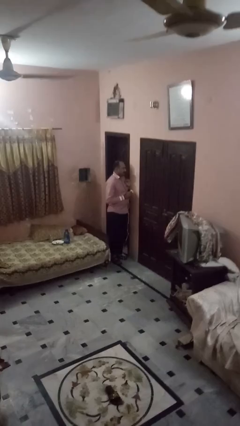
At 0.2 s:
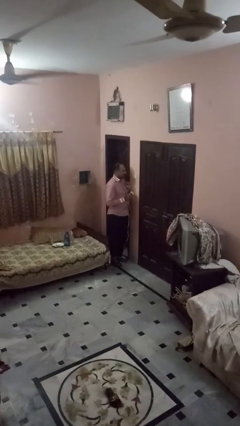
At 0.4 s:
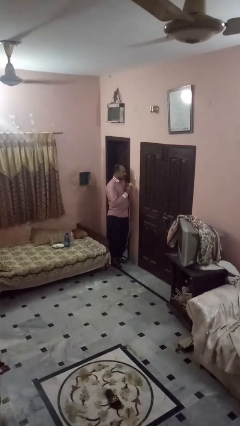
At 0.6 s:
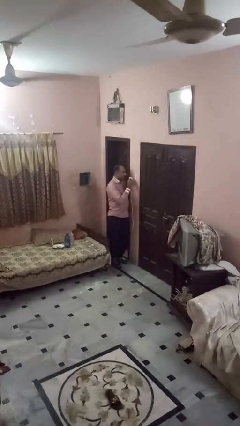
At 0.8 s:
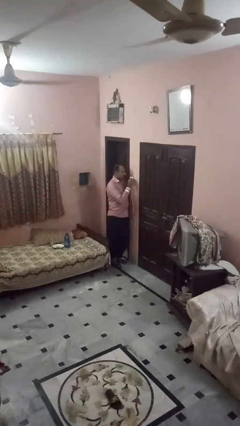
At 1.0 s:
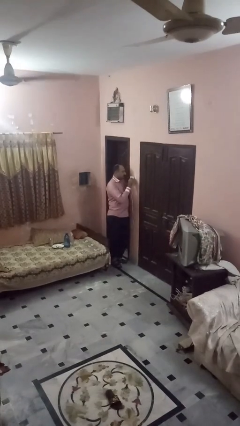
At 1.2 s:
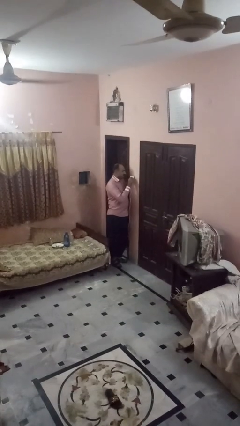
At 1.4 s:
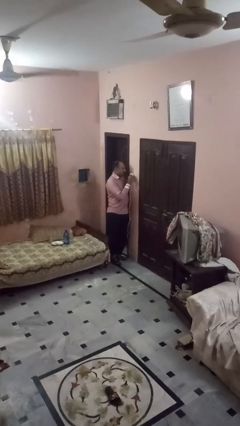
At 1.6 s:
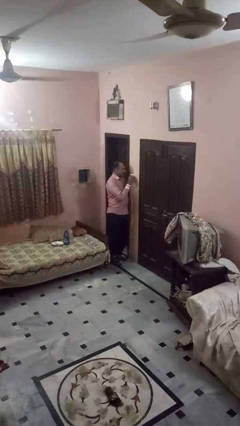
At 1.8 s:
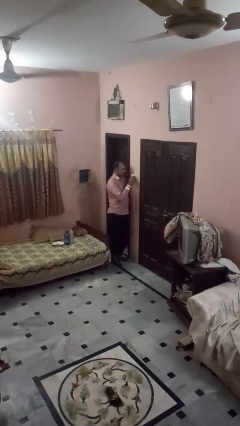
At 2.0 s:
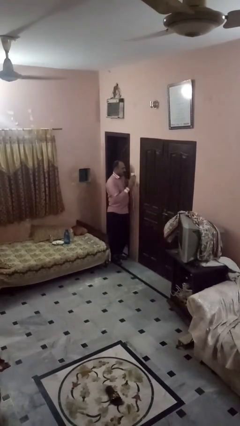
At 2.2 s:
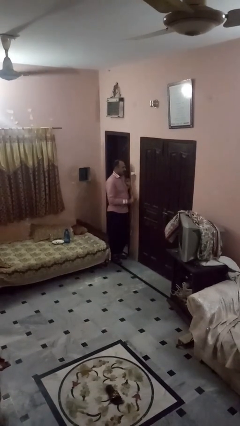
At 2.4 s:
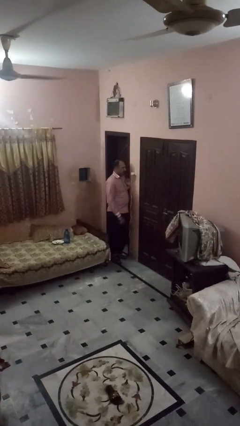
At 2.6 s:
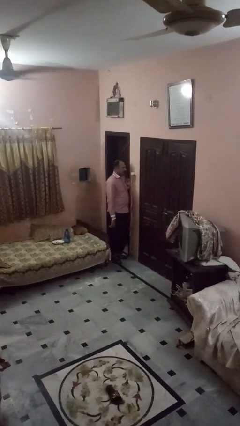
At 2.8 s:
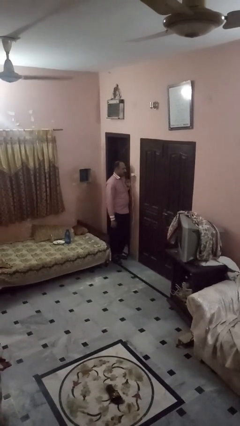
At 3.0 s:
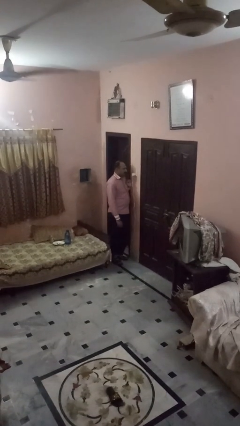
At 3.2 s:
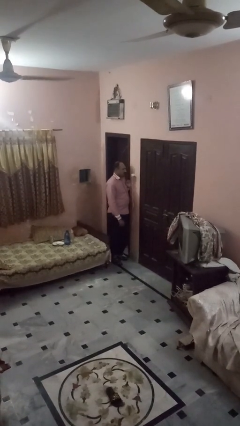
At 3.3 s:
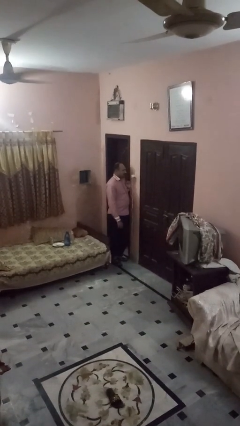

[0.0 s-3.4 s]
person plugs into electrical socket

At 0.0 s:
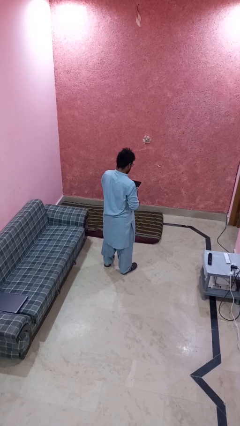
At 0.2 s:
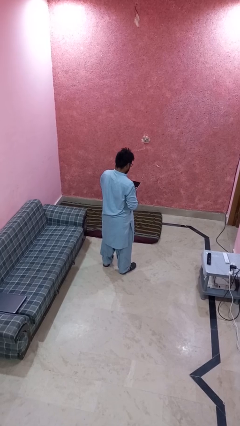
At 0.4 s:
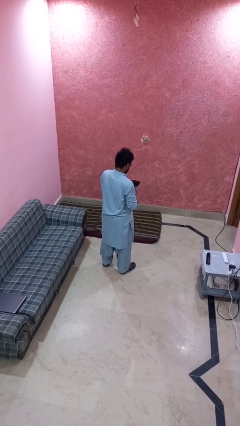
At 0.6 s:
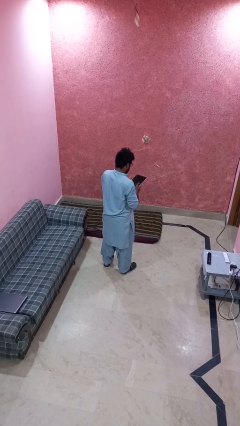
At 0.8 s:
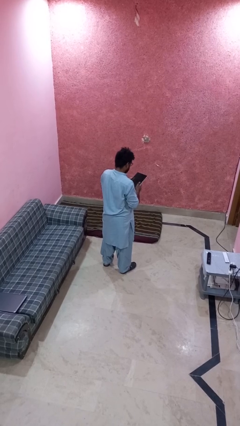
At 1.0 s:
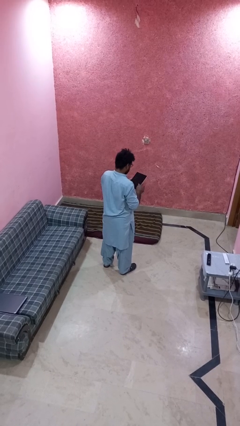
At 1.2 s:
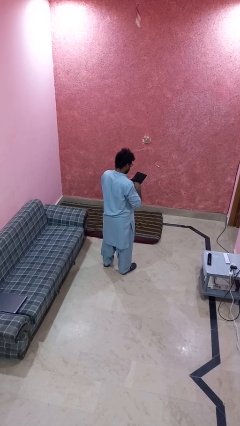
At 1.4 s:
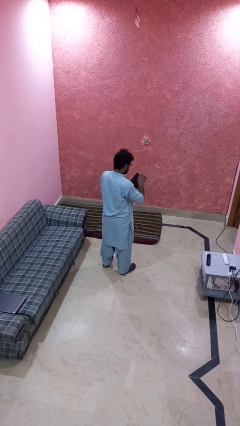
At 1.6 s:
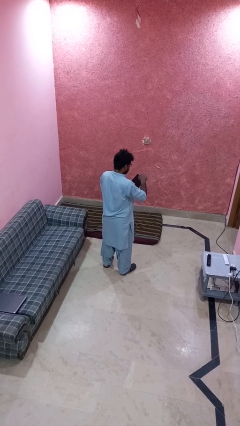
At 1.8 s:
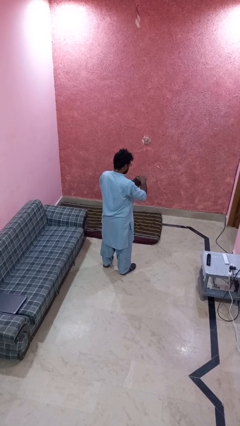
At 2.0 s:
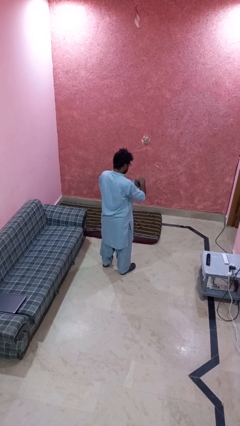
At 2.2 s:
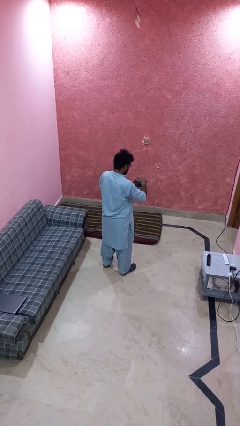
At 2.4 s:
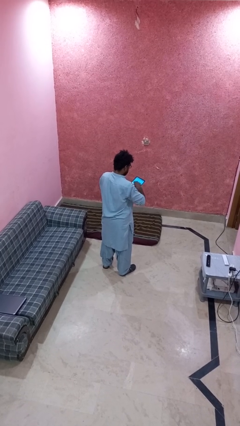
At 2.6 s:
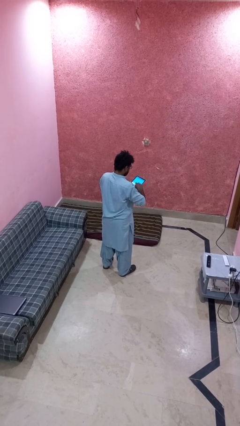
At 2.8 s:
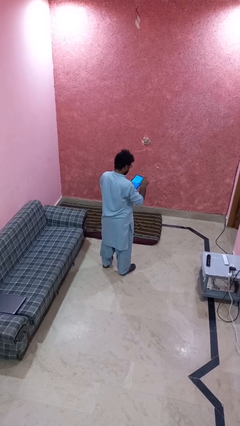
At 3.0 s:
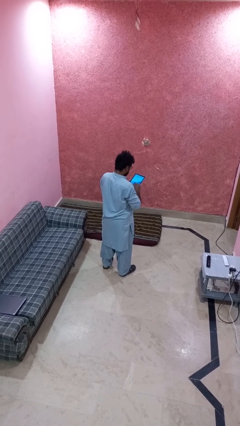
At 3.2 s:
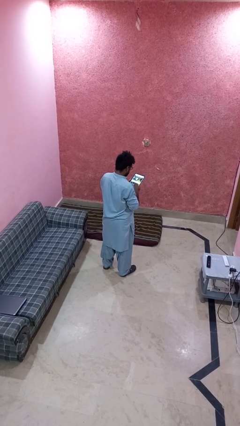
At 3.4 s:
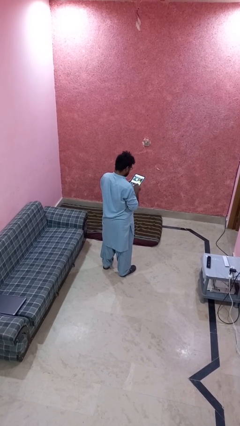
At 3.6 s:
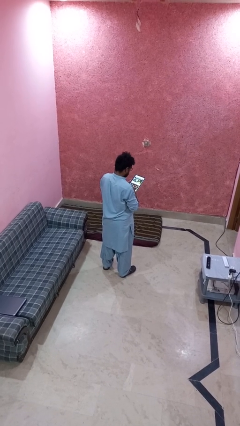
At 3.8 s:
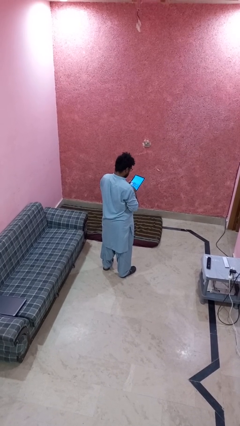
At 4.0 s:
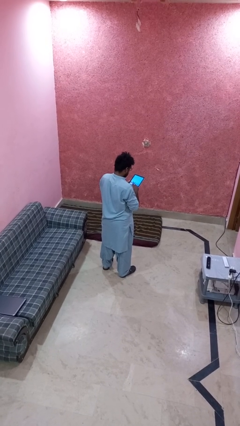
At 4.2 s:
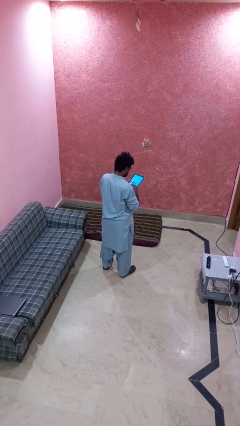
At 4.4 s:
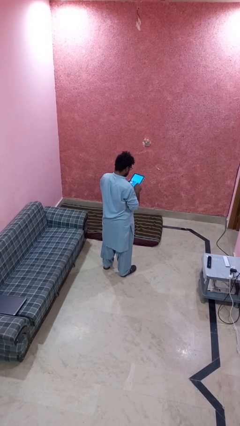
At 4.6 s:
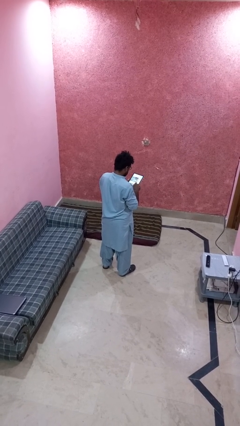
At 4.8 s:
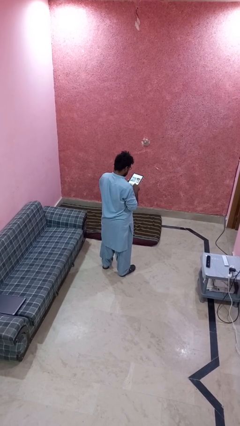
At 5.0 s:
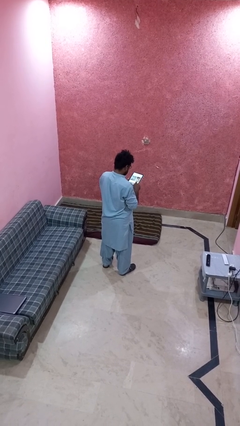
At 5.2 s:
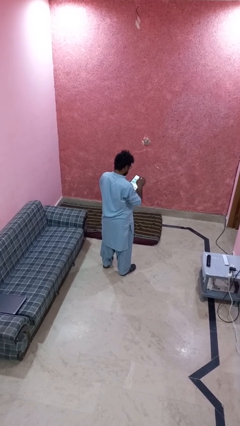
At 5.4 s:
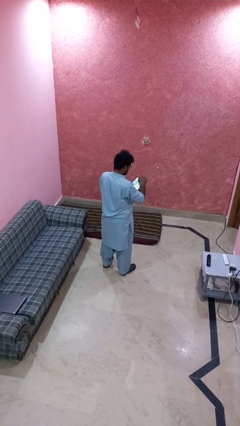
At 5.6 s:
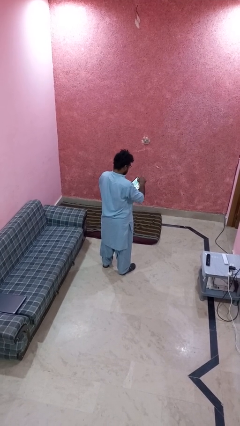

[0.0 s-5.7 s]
person interacts with tablet

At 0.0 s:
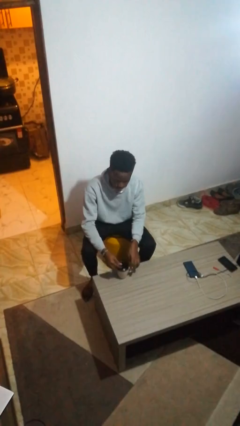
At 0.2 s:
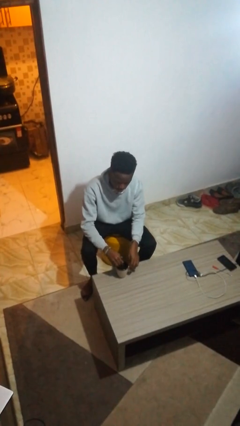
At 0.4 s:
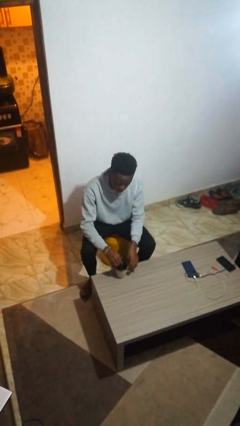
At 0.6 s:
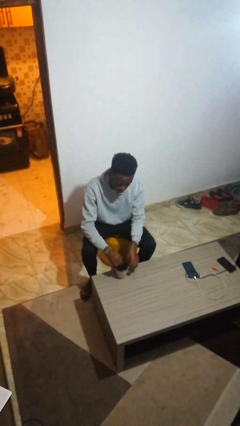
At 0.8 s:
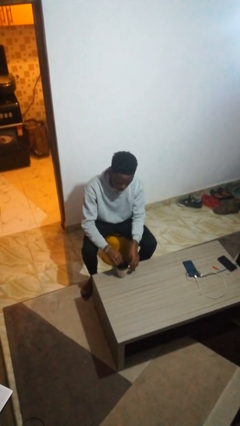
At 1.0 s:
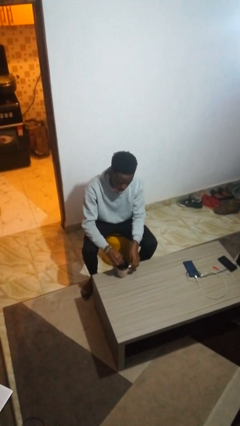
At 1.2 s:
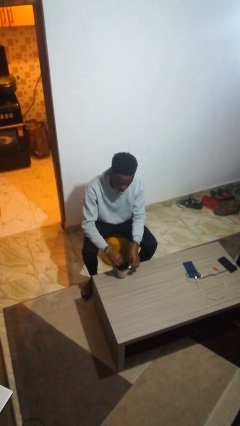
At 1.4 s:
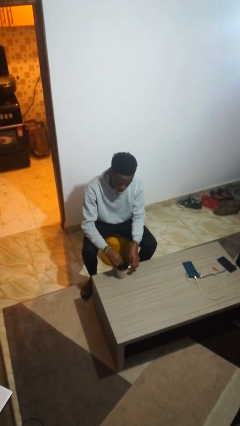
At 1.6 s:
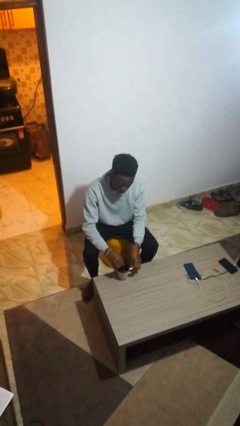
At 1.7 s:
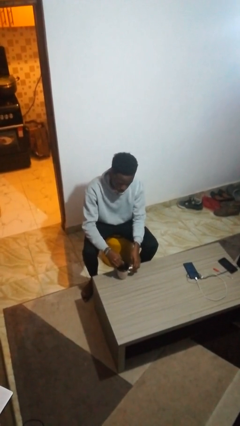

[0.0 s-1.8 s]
person stirs mug

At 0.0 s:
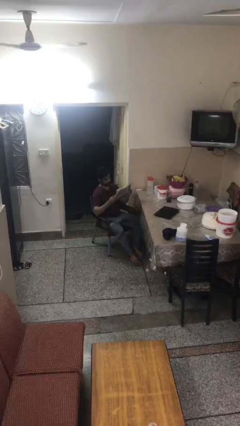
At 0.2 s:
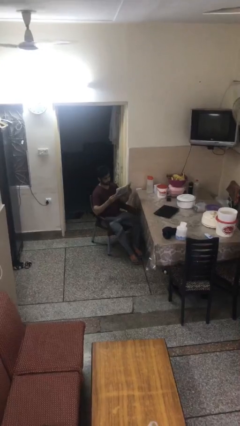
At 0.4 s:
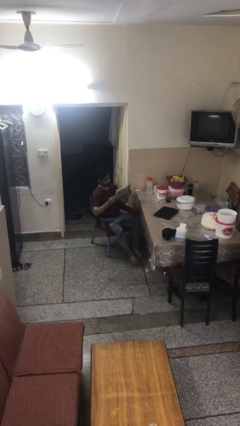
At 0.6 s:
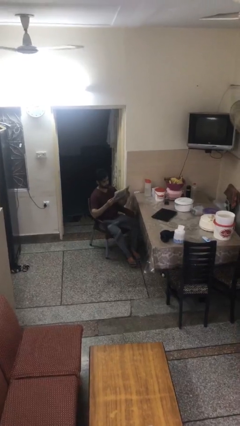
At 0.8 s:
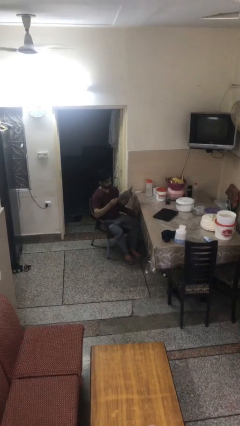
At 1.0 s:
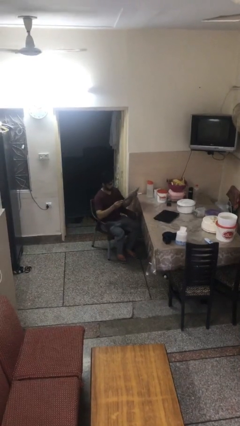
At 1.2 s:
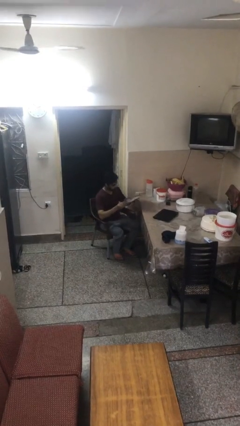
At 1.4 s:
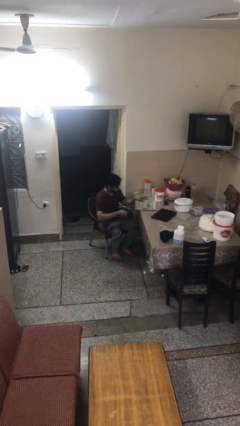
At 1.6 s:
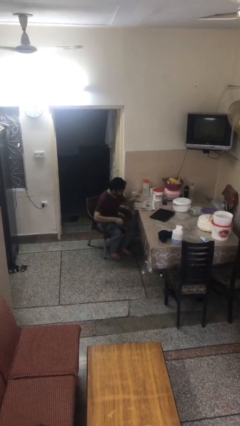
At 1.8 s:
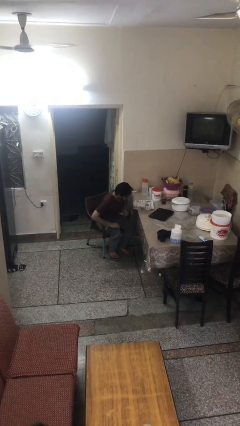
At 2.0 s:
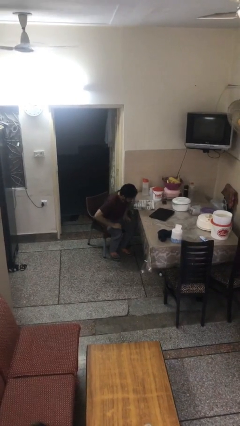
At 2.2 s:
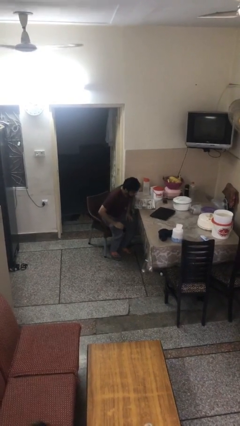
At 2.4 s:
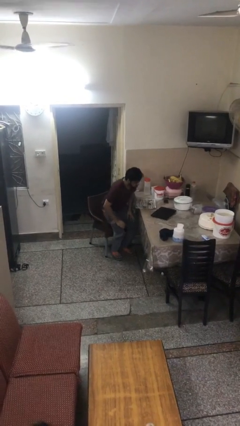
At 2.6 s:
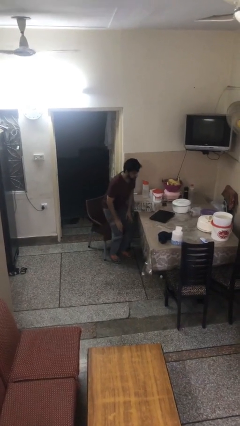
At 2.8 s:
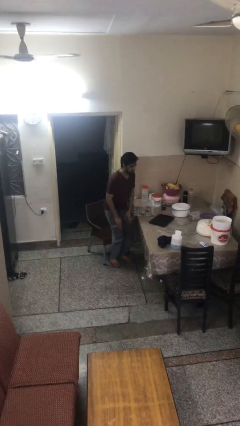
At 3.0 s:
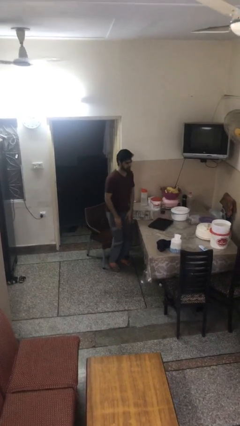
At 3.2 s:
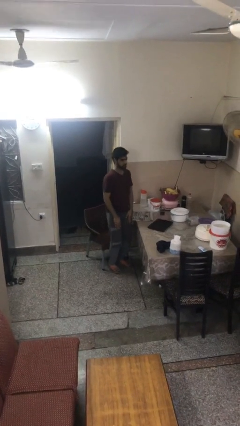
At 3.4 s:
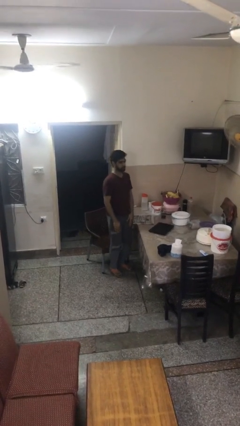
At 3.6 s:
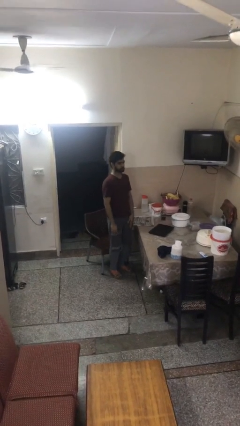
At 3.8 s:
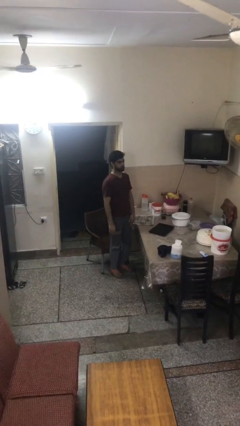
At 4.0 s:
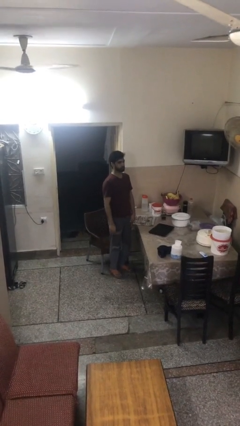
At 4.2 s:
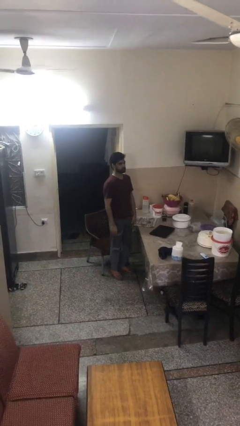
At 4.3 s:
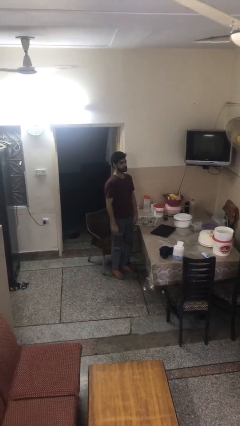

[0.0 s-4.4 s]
person stands up

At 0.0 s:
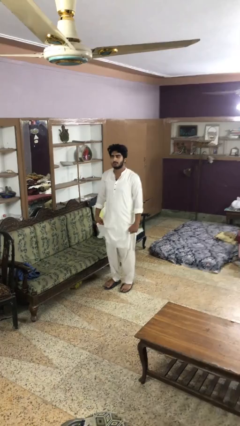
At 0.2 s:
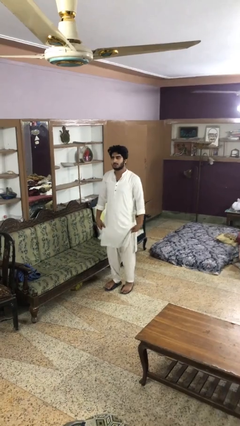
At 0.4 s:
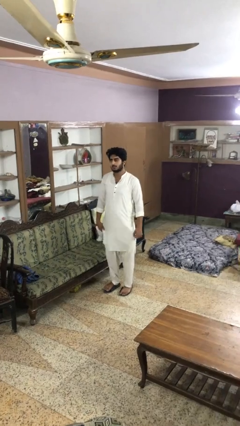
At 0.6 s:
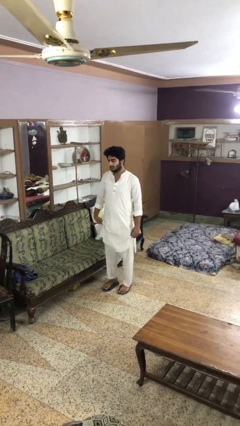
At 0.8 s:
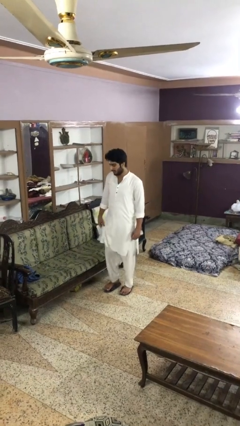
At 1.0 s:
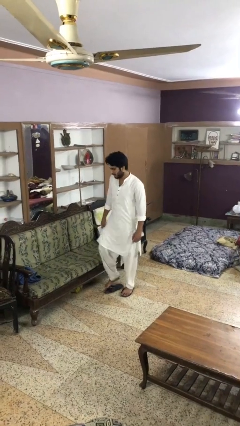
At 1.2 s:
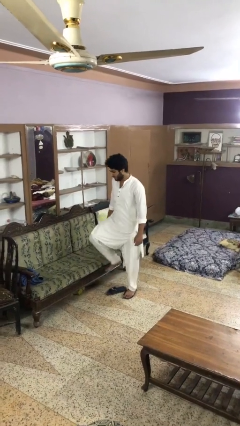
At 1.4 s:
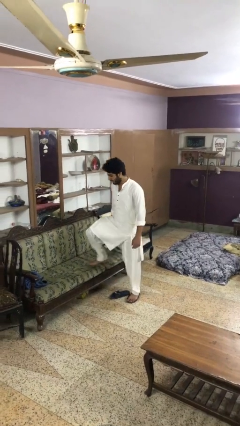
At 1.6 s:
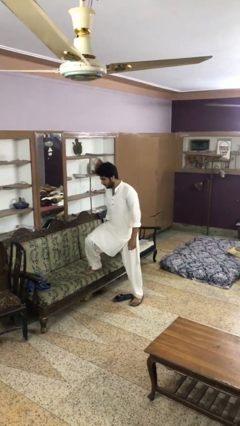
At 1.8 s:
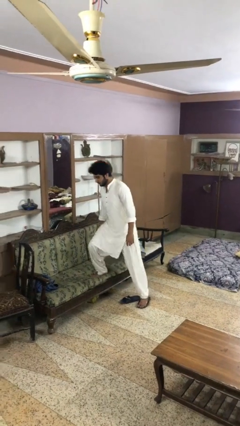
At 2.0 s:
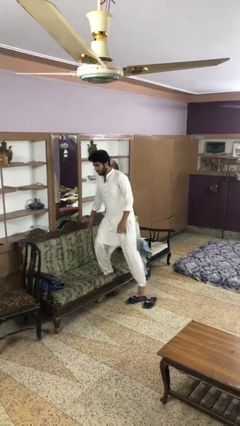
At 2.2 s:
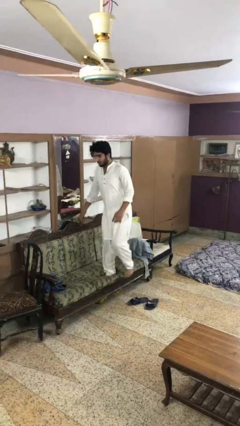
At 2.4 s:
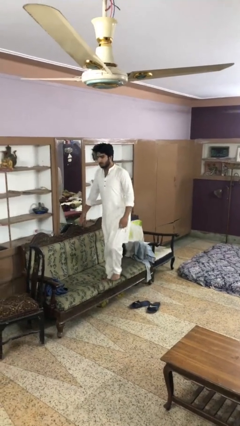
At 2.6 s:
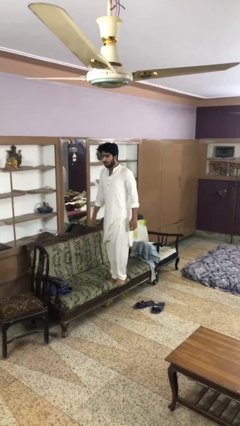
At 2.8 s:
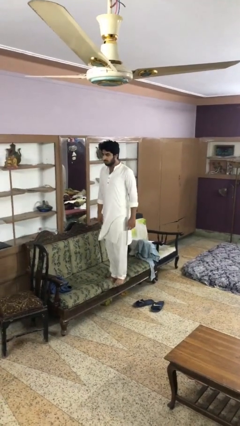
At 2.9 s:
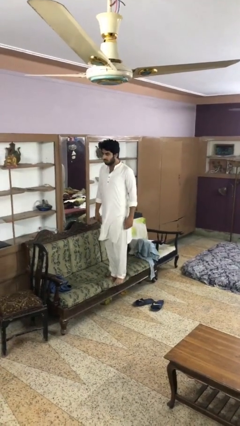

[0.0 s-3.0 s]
person climbs on couch
